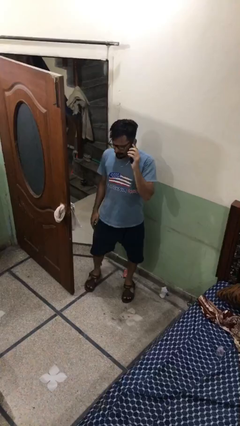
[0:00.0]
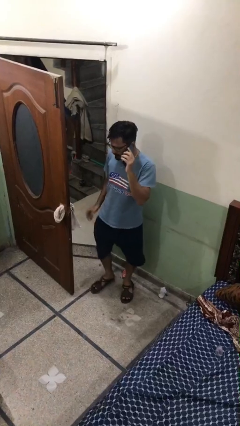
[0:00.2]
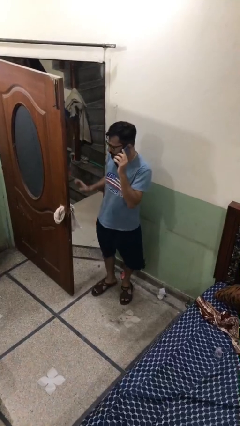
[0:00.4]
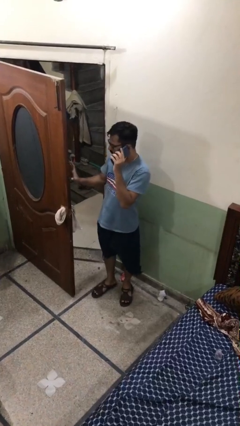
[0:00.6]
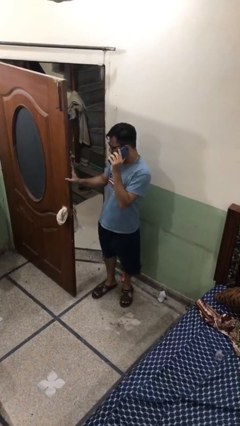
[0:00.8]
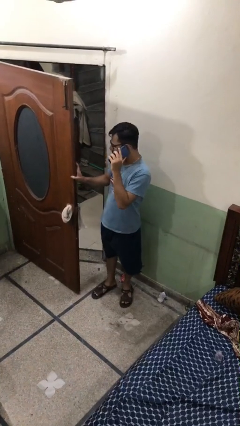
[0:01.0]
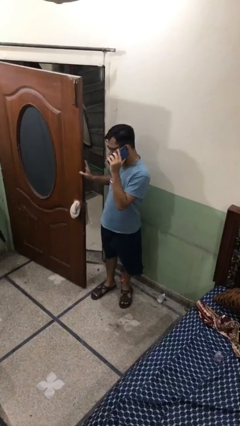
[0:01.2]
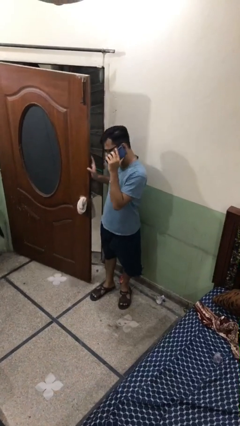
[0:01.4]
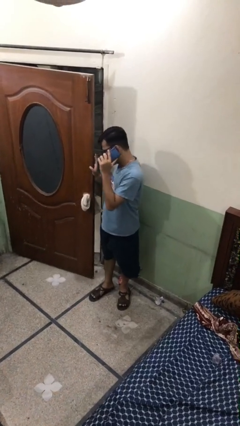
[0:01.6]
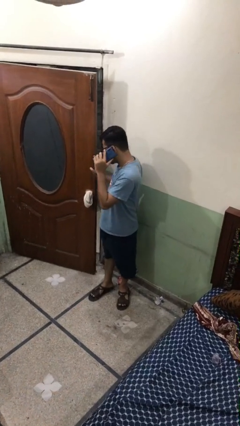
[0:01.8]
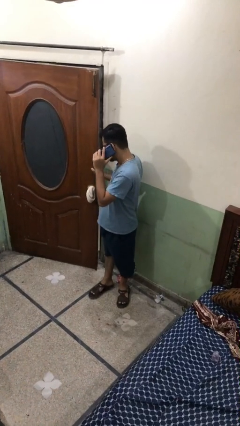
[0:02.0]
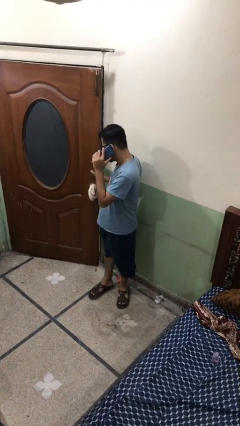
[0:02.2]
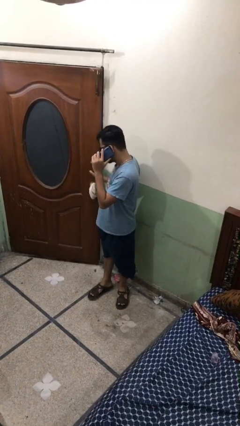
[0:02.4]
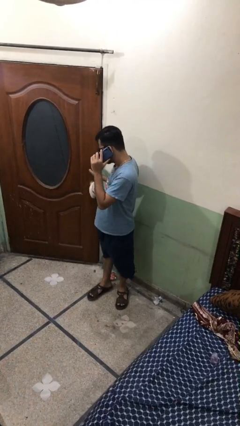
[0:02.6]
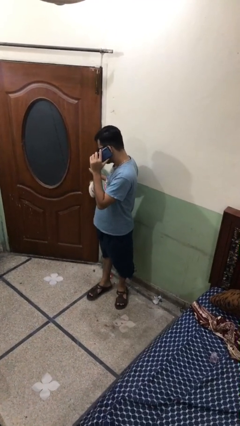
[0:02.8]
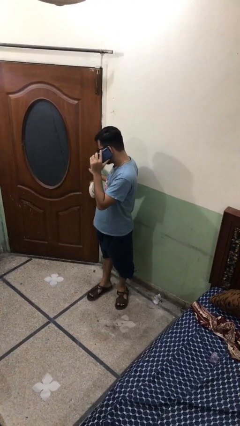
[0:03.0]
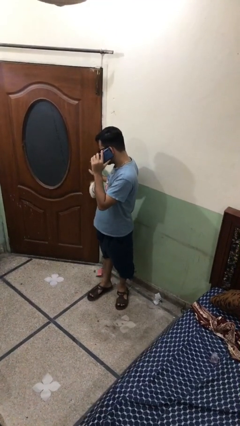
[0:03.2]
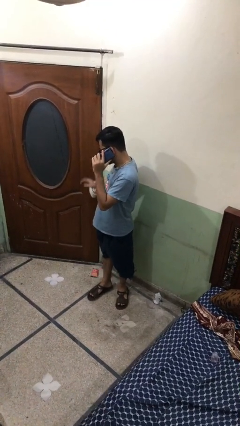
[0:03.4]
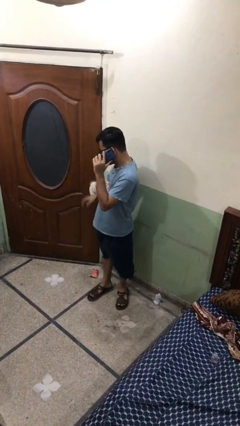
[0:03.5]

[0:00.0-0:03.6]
person closes facility door

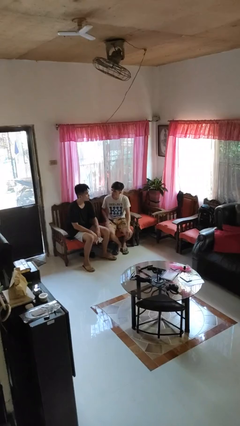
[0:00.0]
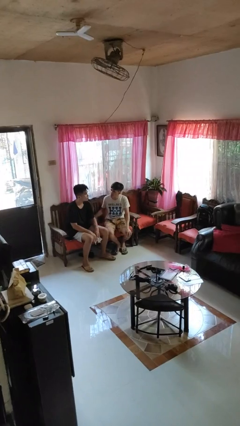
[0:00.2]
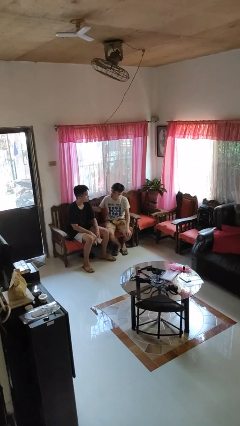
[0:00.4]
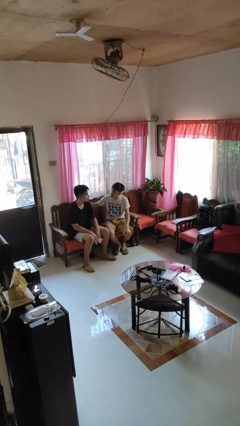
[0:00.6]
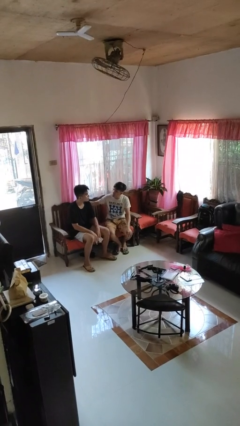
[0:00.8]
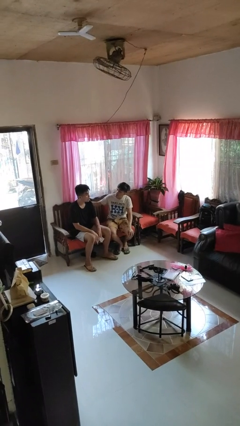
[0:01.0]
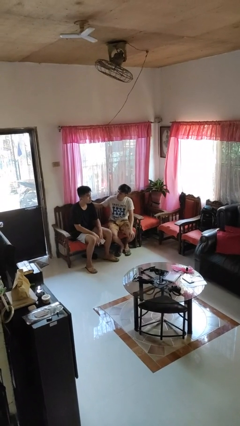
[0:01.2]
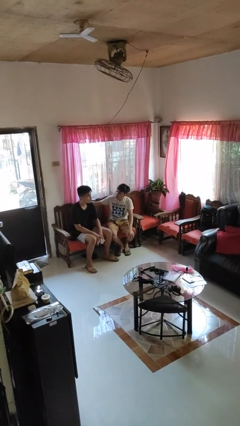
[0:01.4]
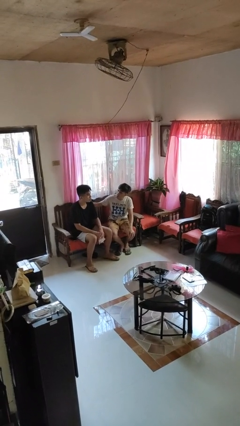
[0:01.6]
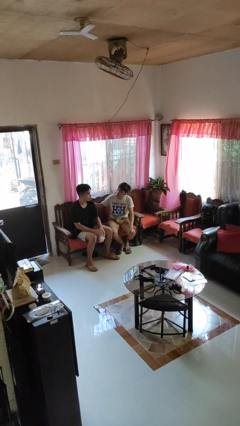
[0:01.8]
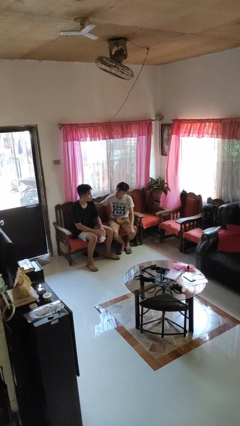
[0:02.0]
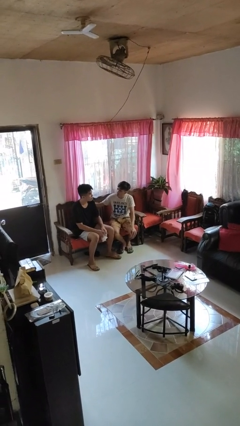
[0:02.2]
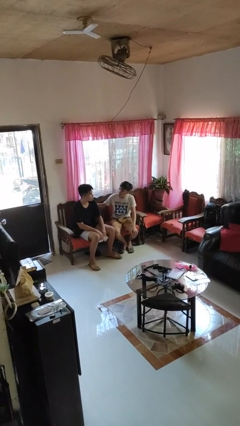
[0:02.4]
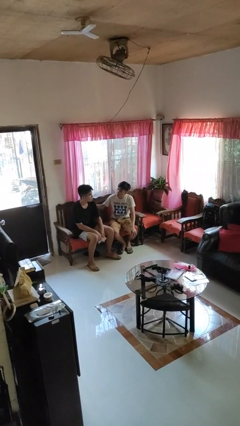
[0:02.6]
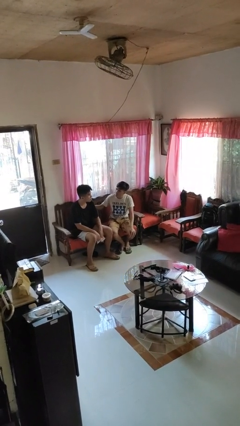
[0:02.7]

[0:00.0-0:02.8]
person touches back of person

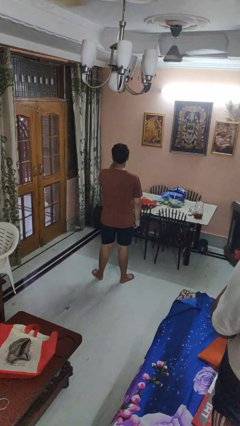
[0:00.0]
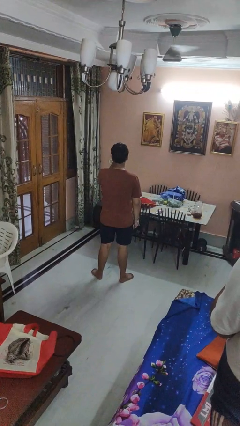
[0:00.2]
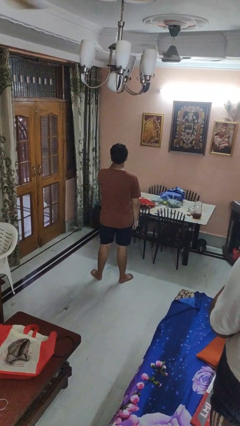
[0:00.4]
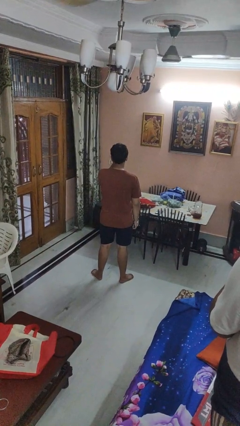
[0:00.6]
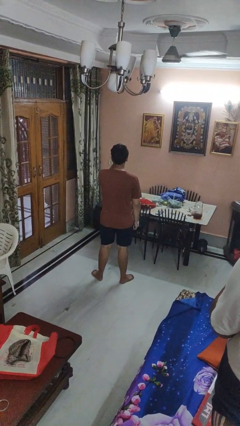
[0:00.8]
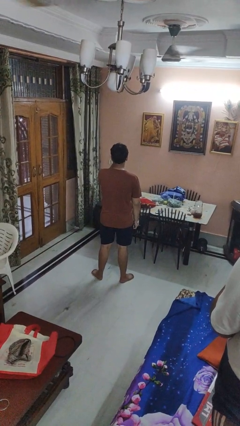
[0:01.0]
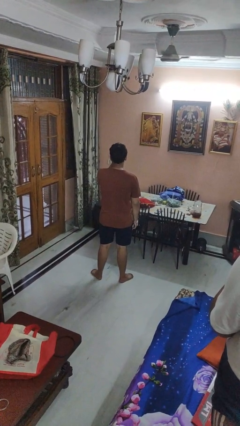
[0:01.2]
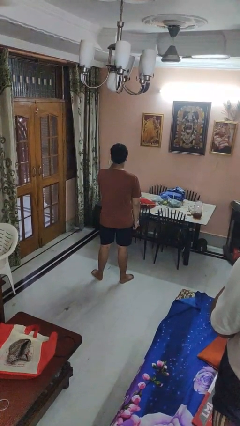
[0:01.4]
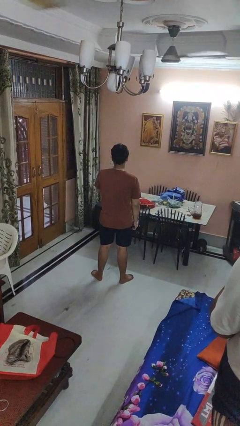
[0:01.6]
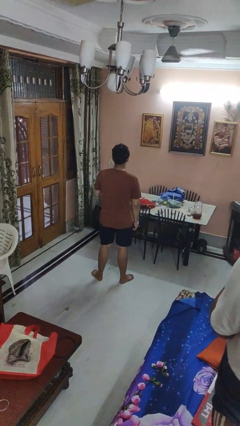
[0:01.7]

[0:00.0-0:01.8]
person gestures watch closely

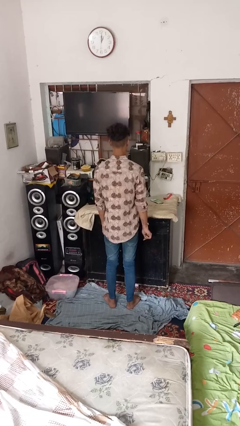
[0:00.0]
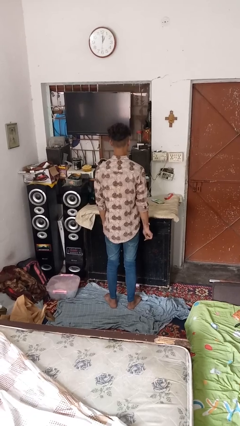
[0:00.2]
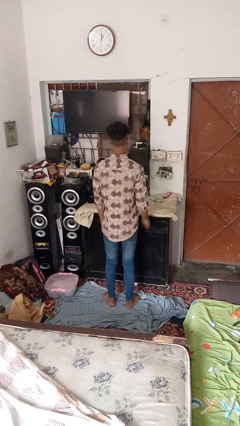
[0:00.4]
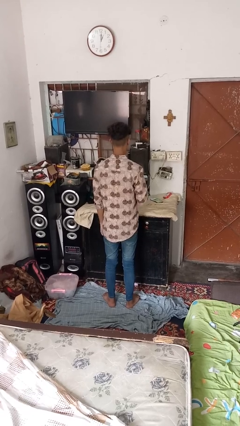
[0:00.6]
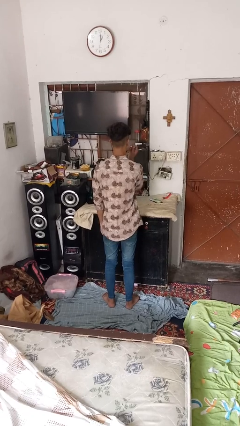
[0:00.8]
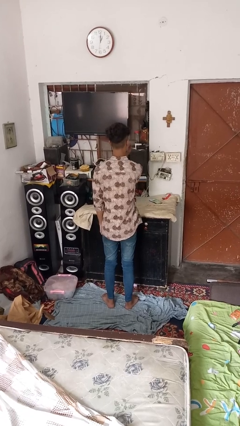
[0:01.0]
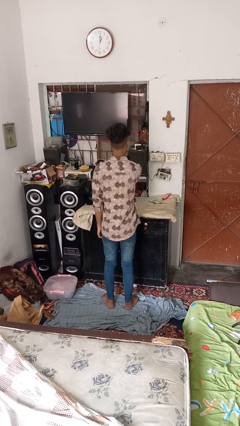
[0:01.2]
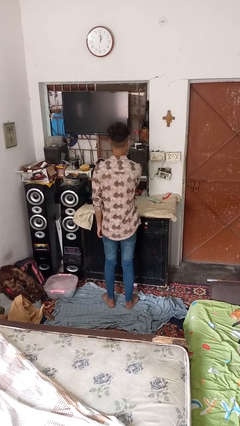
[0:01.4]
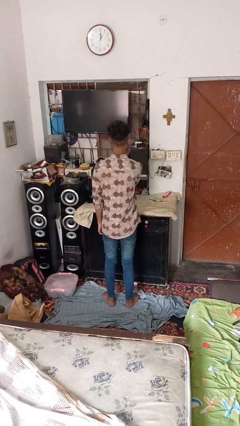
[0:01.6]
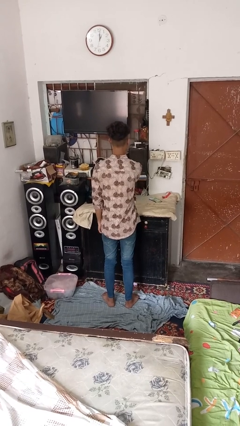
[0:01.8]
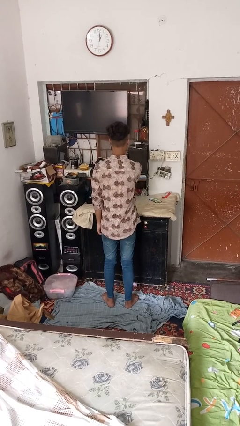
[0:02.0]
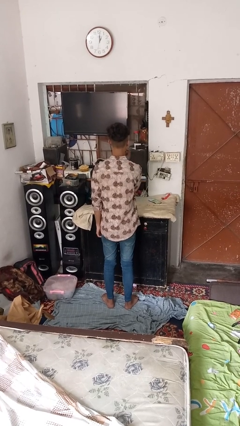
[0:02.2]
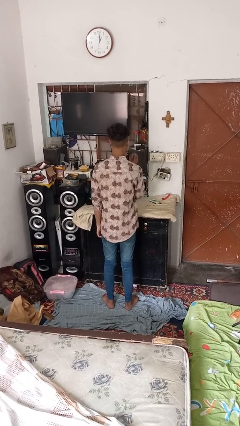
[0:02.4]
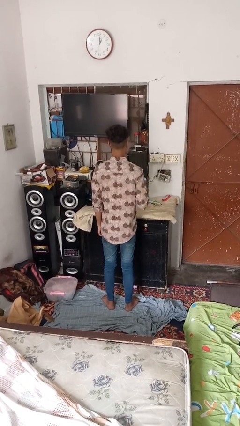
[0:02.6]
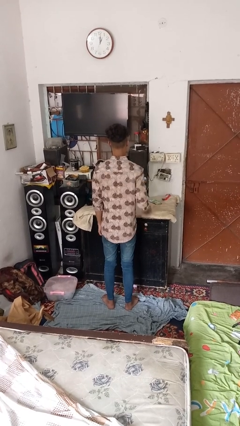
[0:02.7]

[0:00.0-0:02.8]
person applies lip makeup

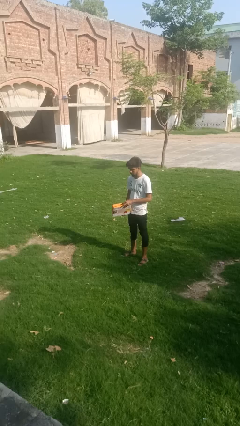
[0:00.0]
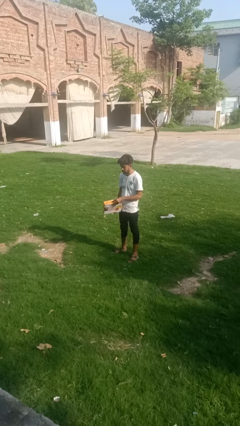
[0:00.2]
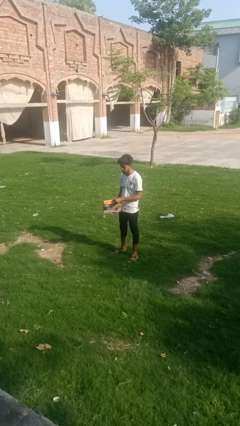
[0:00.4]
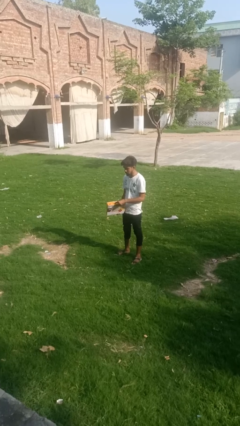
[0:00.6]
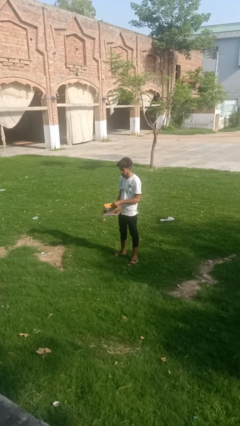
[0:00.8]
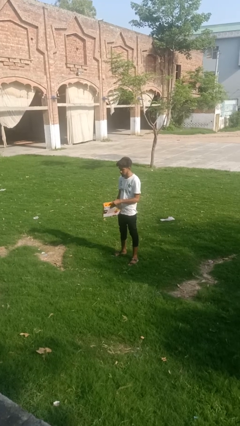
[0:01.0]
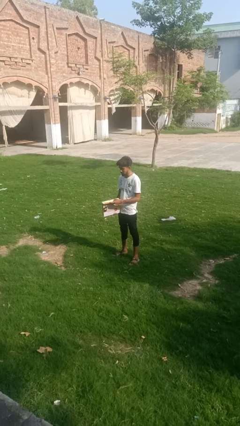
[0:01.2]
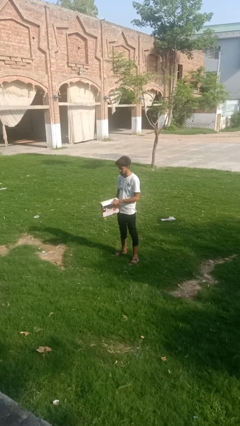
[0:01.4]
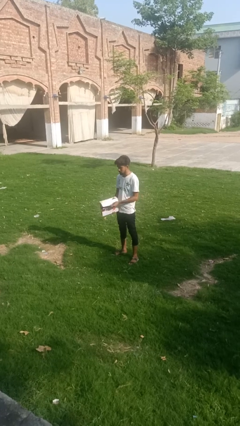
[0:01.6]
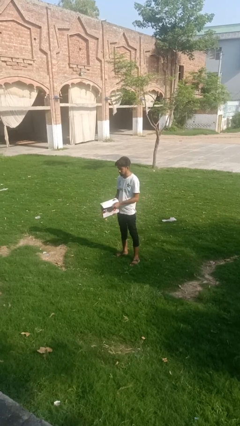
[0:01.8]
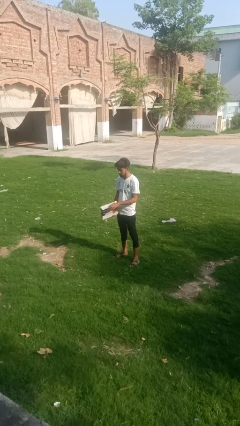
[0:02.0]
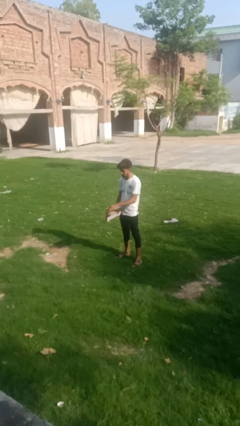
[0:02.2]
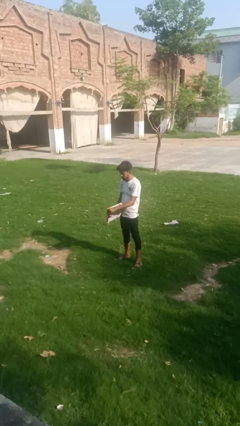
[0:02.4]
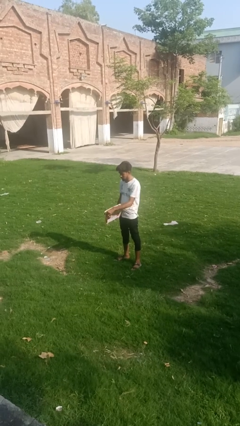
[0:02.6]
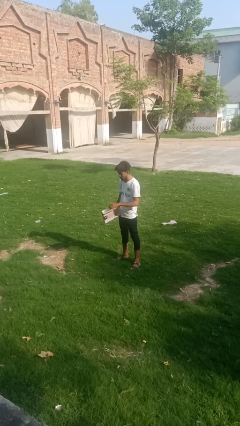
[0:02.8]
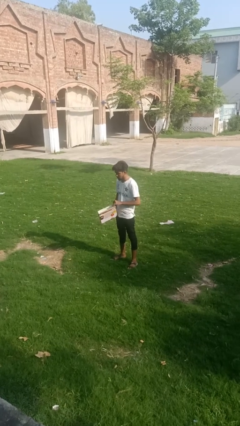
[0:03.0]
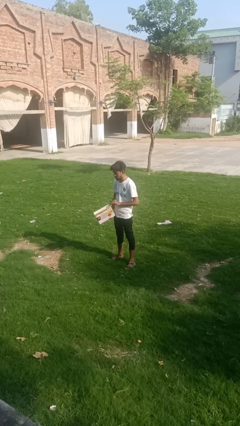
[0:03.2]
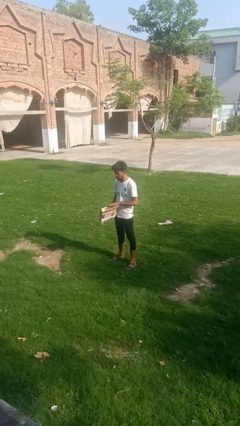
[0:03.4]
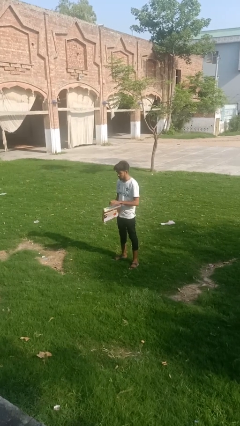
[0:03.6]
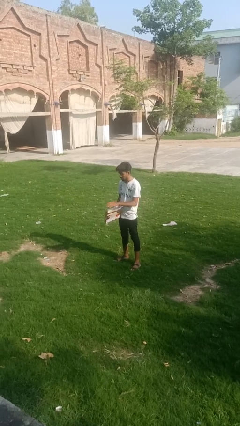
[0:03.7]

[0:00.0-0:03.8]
person opens mailbox

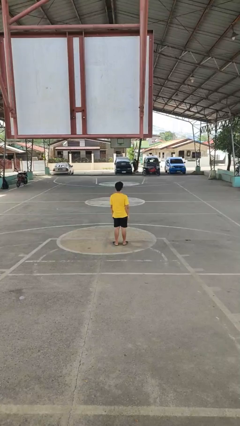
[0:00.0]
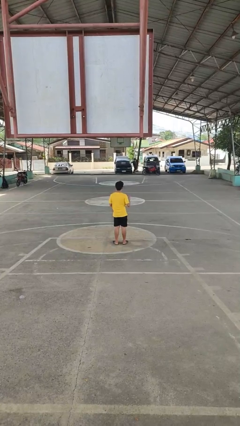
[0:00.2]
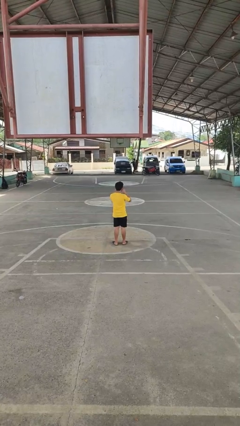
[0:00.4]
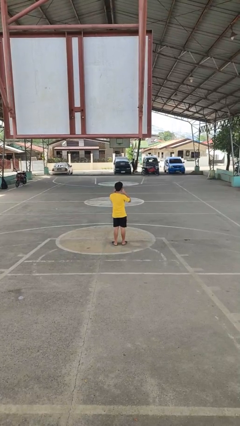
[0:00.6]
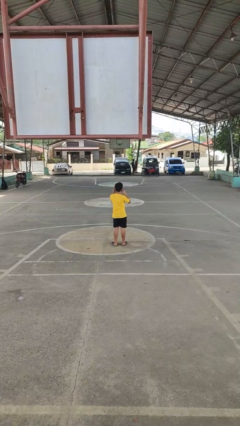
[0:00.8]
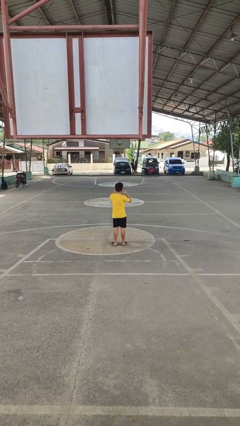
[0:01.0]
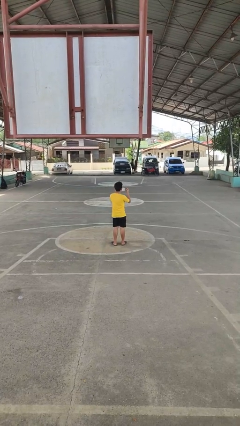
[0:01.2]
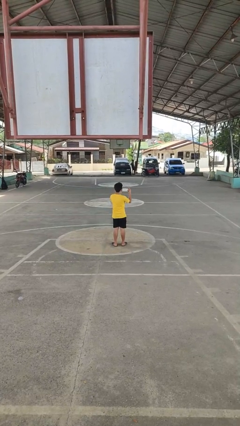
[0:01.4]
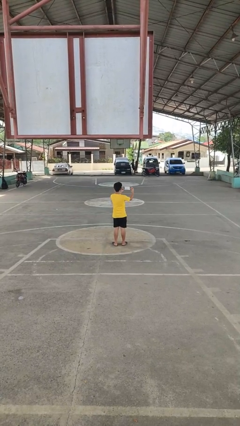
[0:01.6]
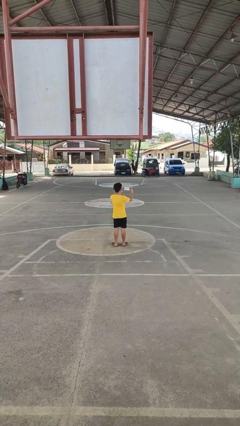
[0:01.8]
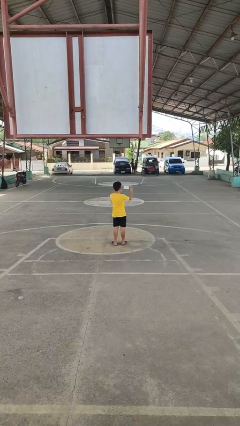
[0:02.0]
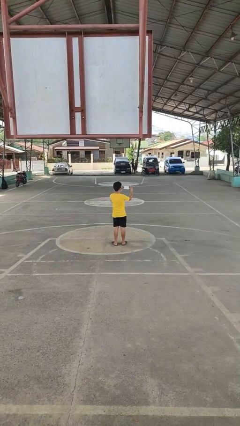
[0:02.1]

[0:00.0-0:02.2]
person takes off facemask
